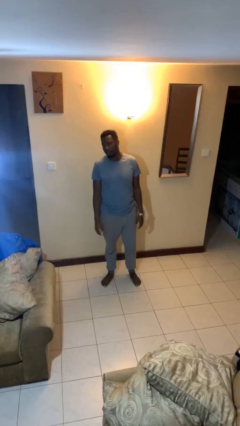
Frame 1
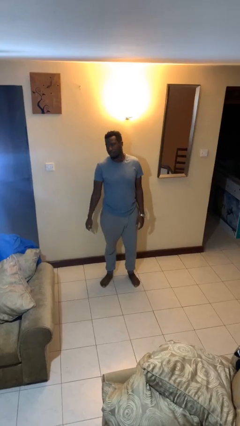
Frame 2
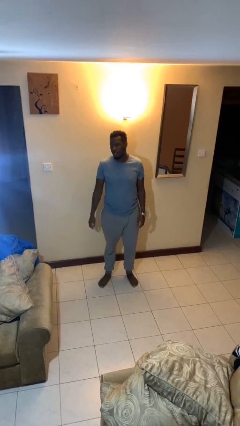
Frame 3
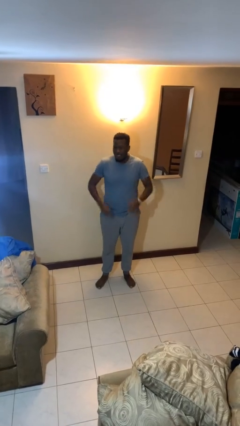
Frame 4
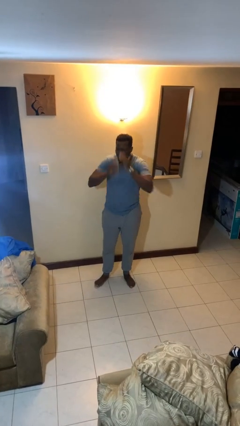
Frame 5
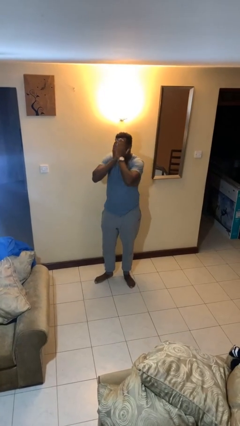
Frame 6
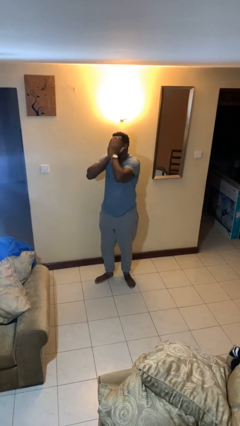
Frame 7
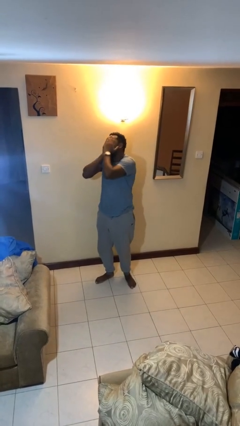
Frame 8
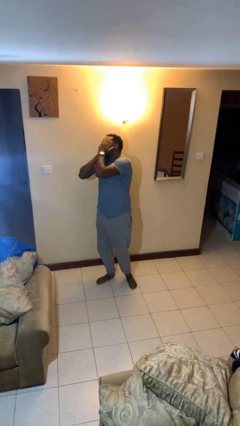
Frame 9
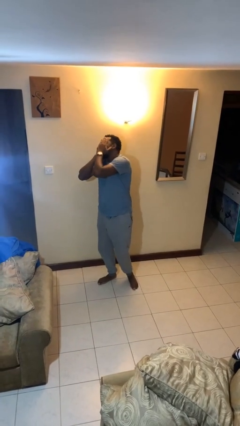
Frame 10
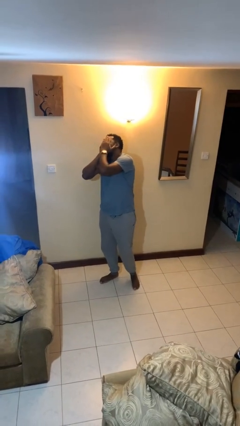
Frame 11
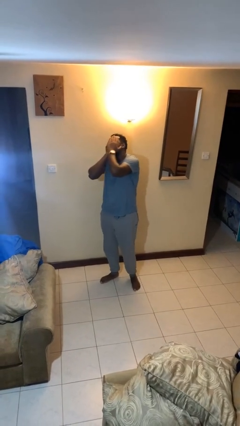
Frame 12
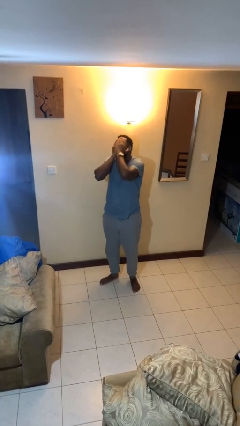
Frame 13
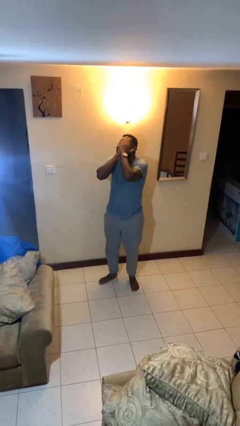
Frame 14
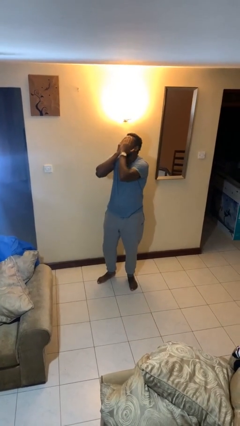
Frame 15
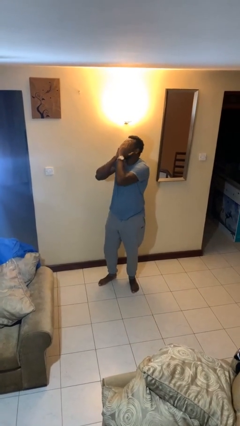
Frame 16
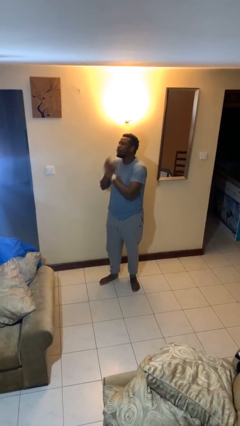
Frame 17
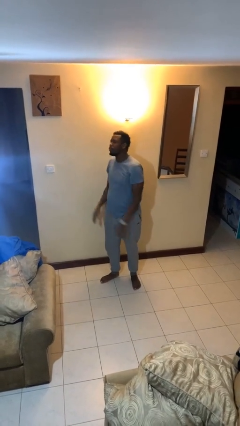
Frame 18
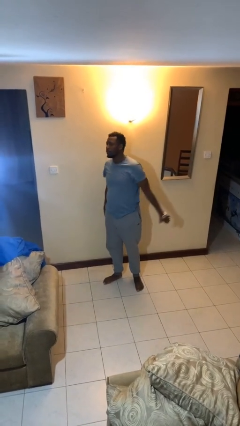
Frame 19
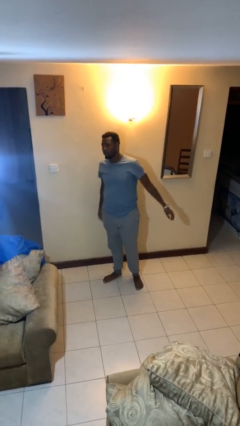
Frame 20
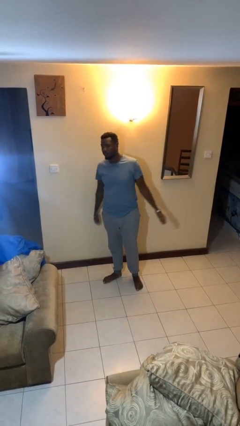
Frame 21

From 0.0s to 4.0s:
person covers face with hands

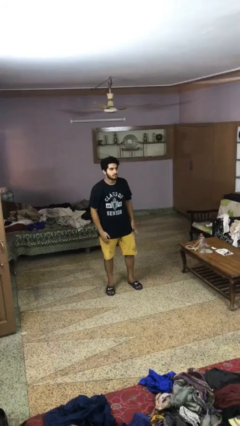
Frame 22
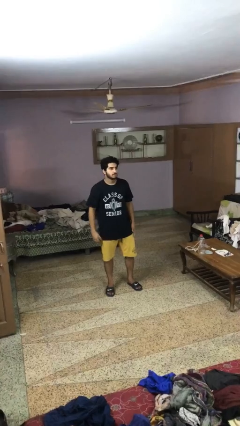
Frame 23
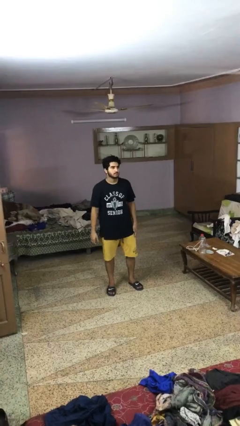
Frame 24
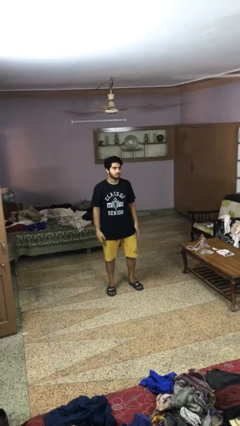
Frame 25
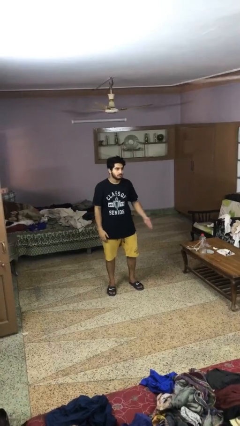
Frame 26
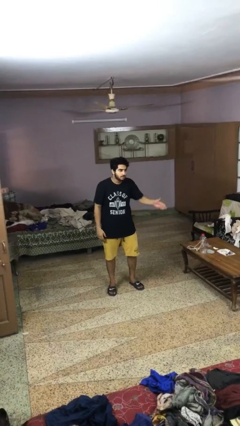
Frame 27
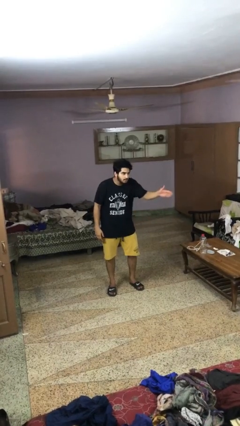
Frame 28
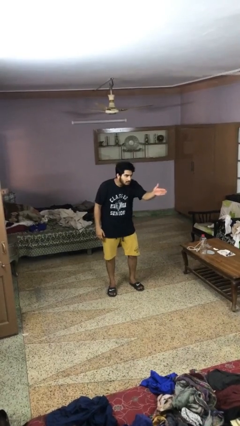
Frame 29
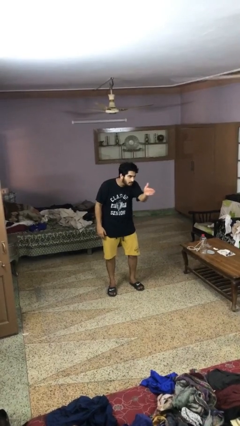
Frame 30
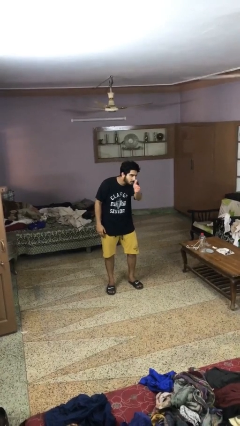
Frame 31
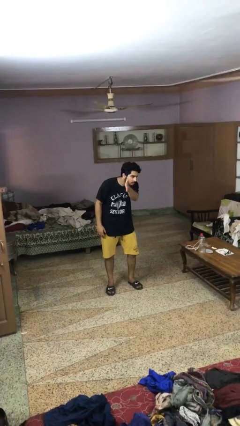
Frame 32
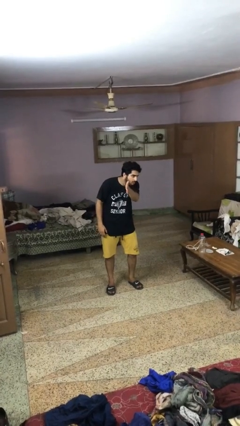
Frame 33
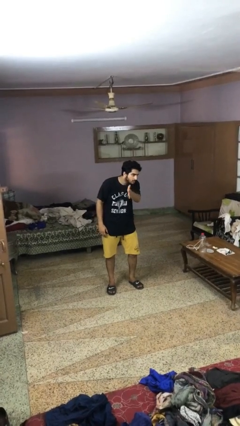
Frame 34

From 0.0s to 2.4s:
person gestures swipe right

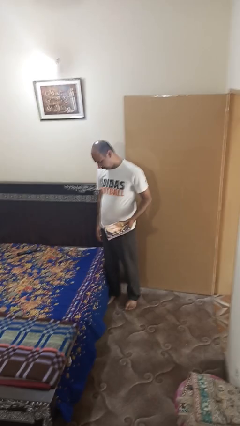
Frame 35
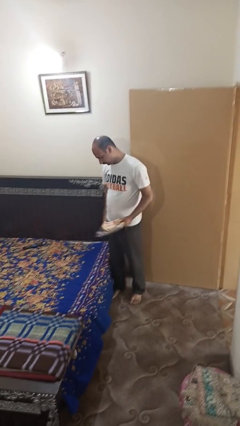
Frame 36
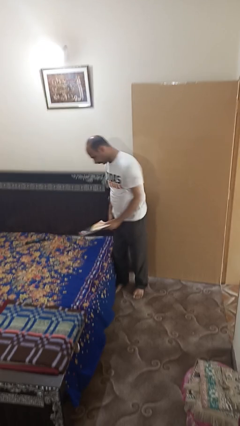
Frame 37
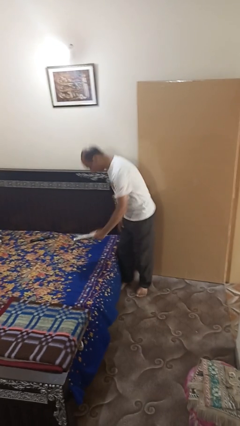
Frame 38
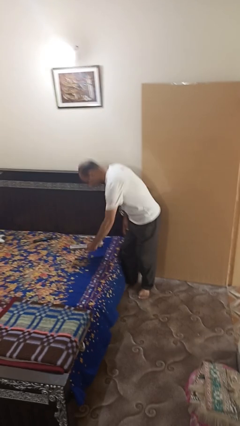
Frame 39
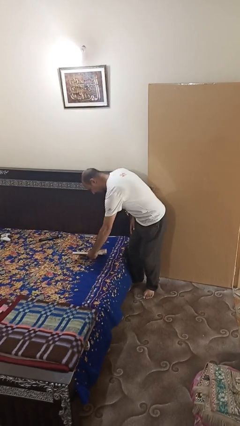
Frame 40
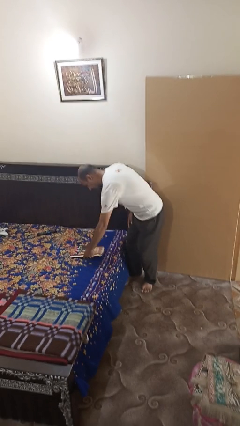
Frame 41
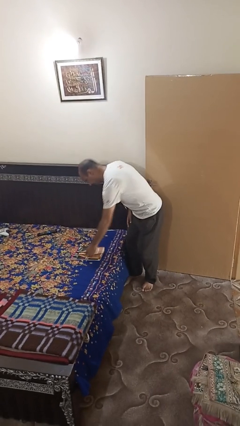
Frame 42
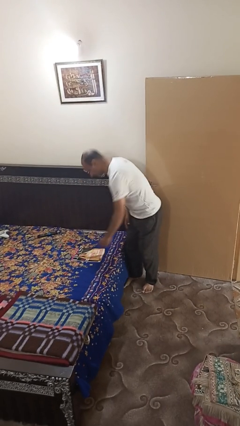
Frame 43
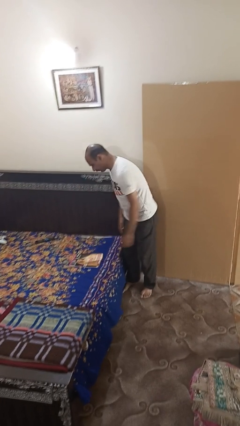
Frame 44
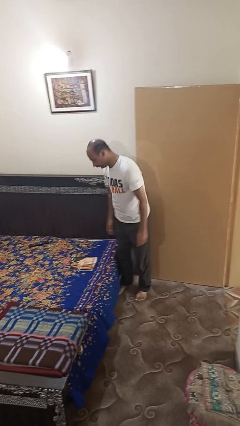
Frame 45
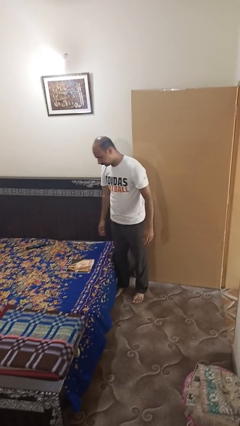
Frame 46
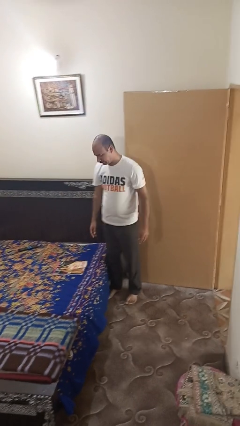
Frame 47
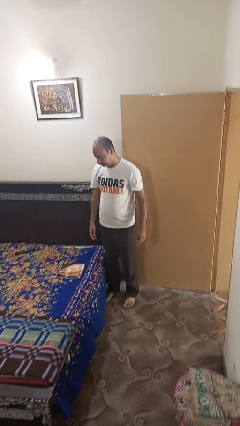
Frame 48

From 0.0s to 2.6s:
person puts down object on bed

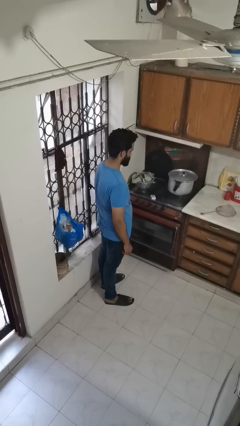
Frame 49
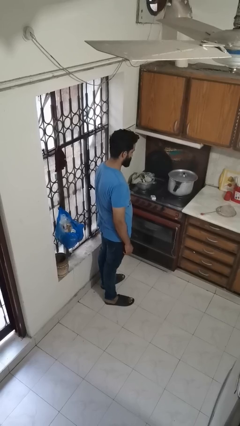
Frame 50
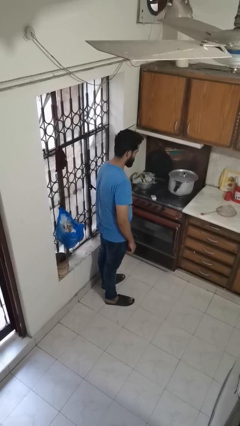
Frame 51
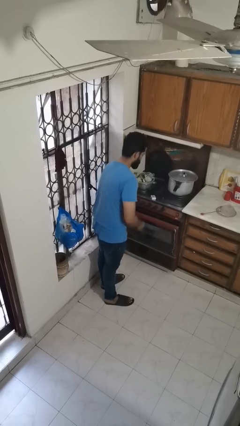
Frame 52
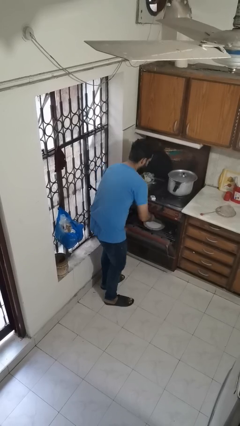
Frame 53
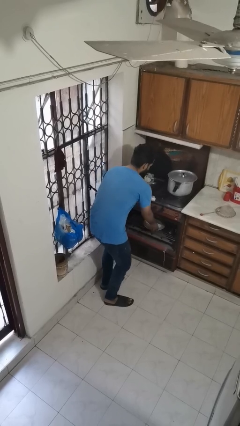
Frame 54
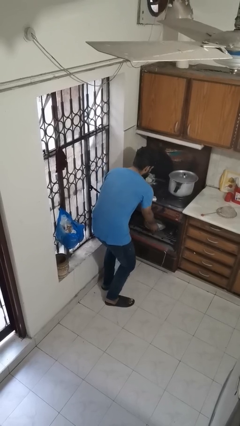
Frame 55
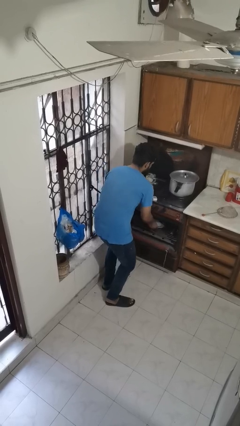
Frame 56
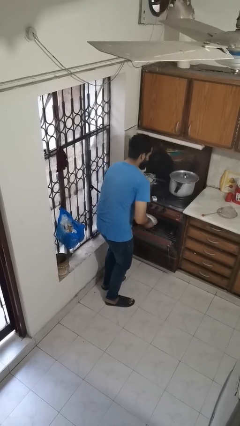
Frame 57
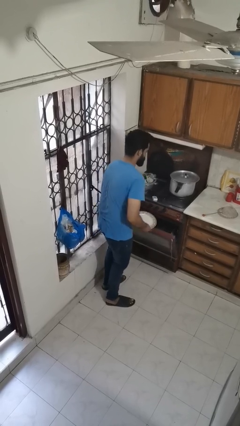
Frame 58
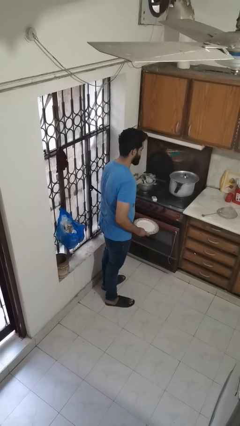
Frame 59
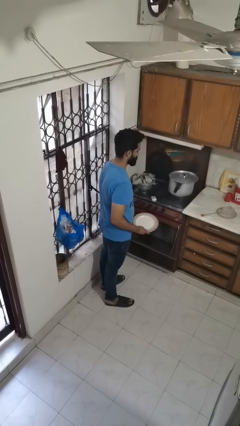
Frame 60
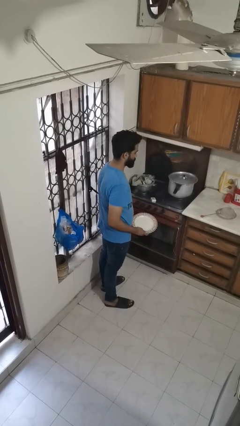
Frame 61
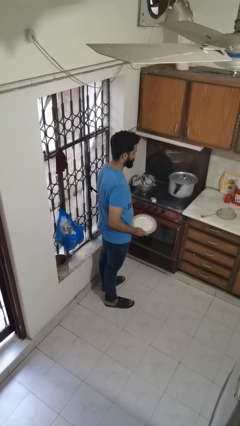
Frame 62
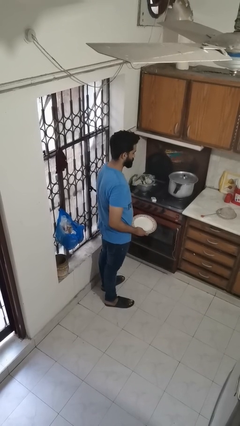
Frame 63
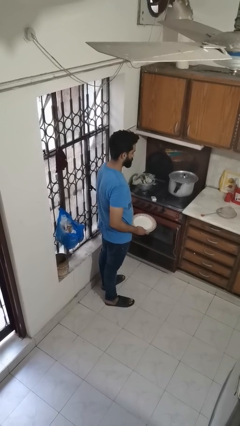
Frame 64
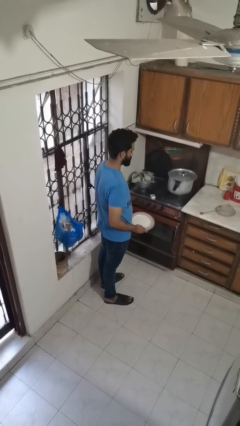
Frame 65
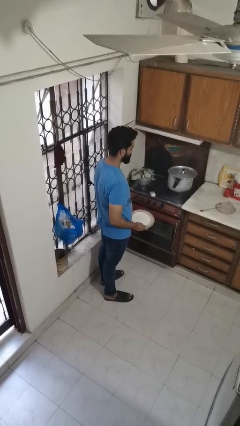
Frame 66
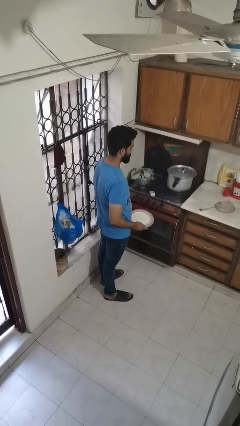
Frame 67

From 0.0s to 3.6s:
person takes object from oven

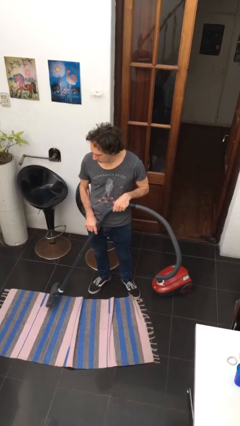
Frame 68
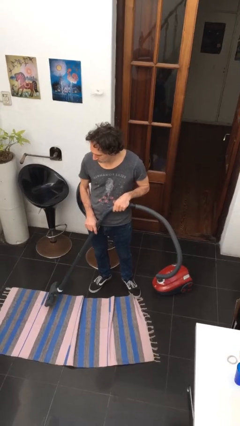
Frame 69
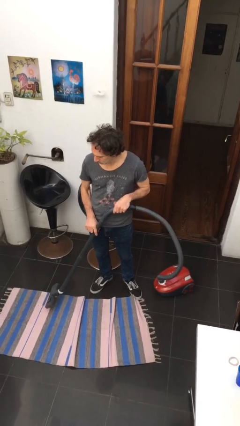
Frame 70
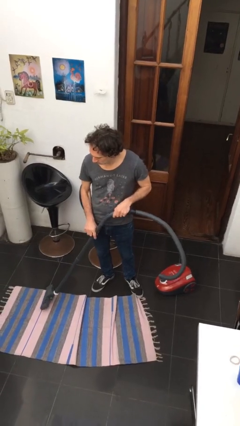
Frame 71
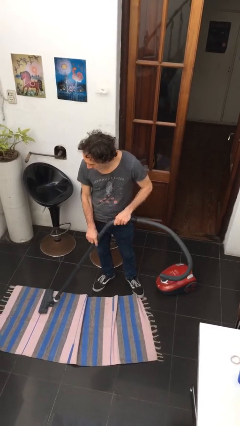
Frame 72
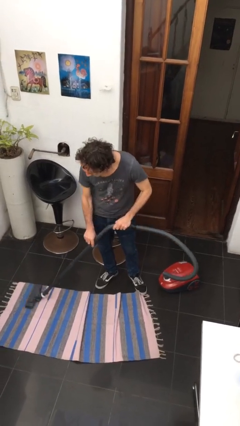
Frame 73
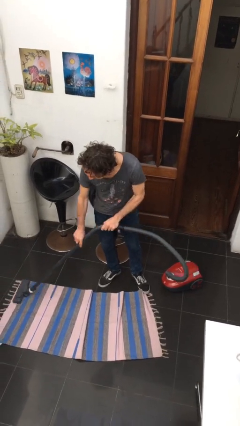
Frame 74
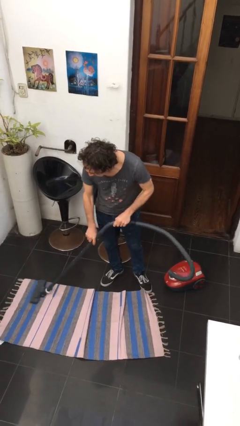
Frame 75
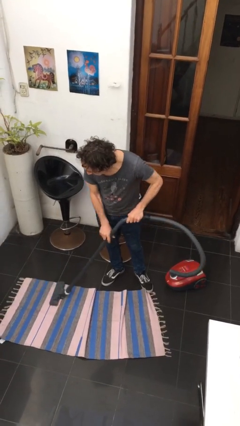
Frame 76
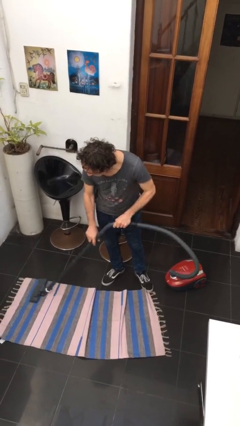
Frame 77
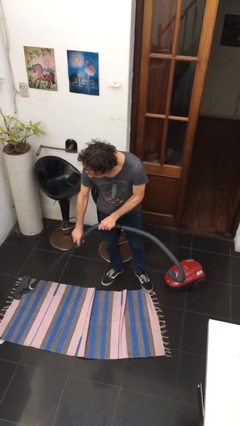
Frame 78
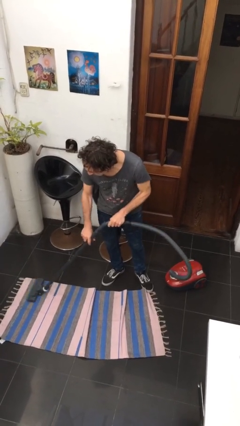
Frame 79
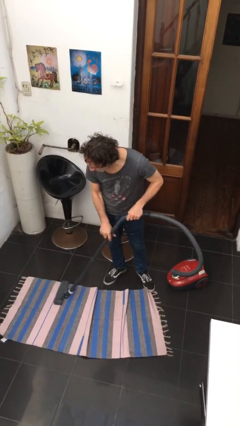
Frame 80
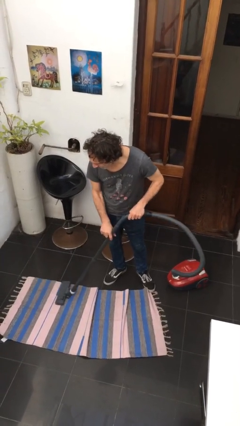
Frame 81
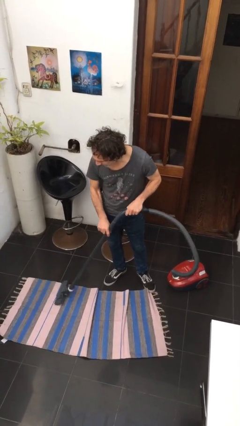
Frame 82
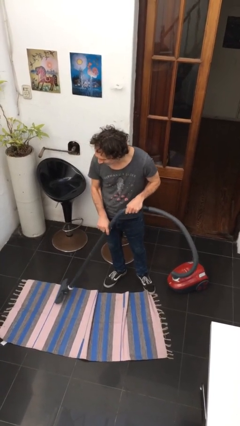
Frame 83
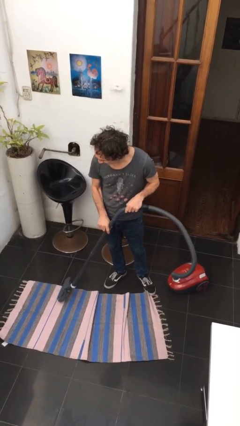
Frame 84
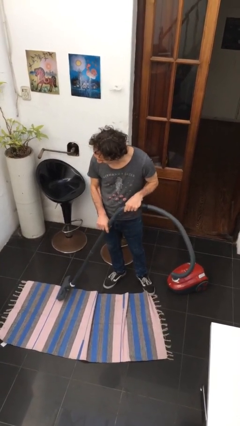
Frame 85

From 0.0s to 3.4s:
person vacuums carpet

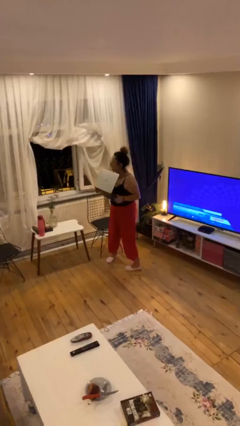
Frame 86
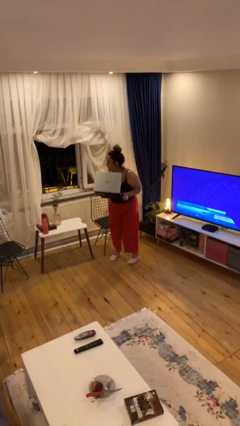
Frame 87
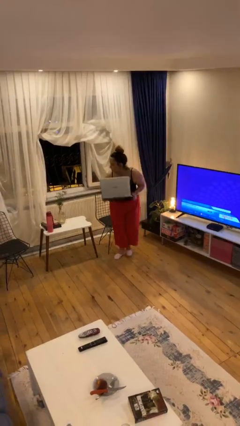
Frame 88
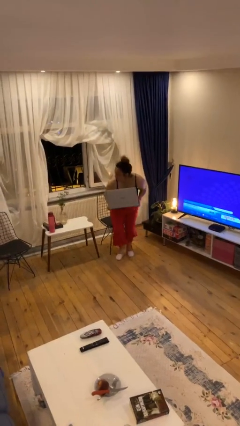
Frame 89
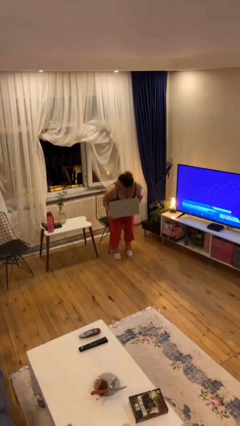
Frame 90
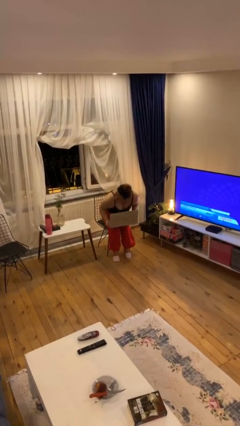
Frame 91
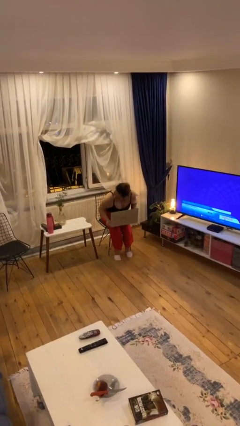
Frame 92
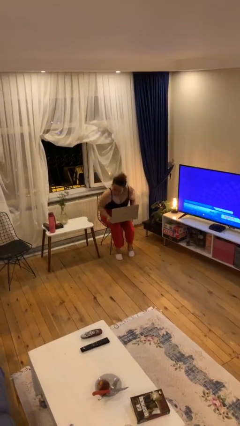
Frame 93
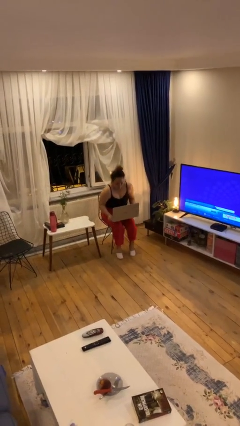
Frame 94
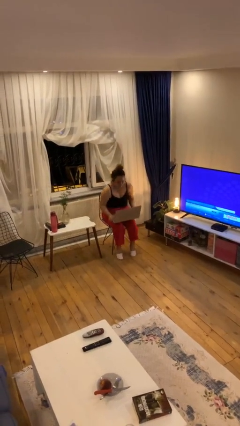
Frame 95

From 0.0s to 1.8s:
person sits down
